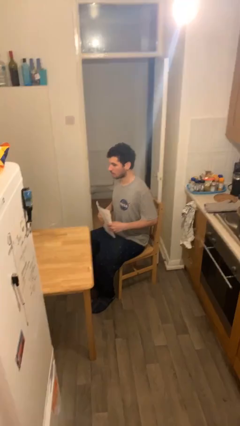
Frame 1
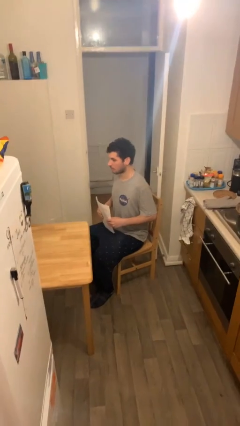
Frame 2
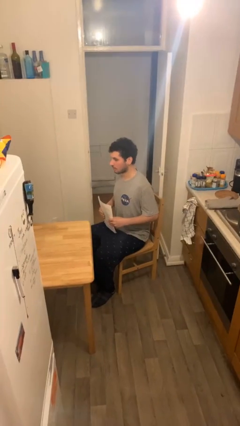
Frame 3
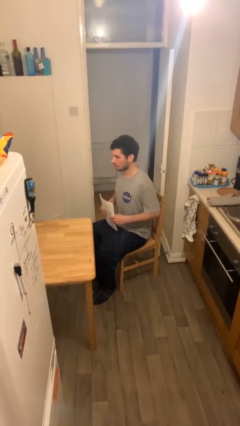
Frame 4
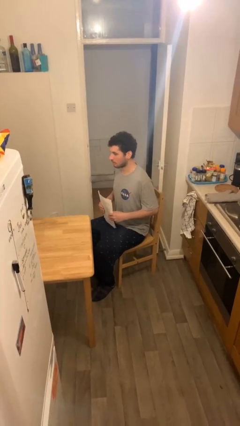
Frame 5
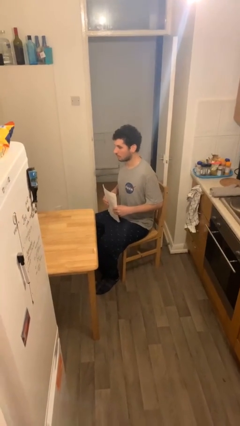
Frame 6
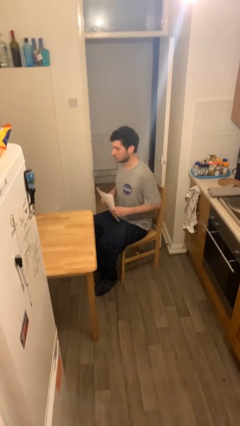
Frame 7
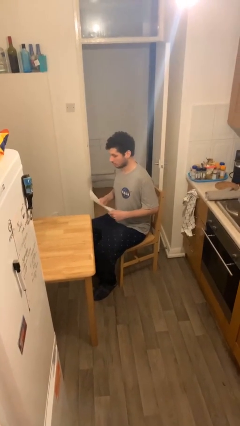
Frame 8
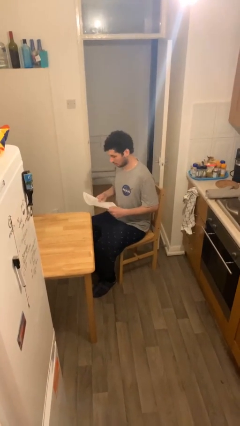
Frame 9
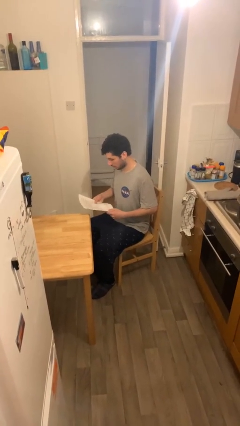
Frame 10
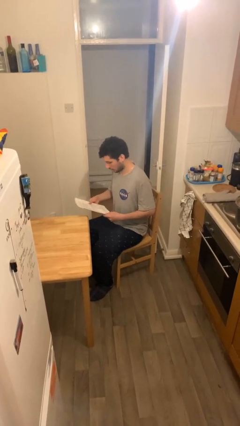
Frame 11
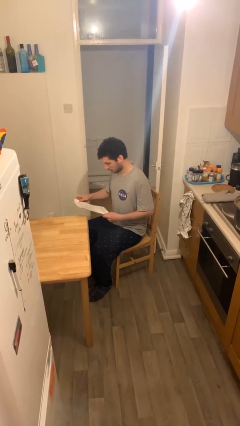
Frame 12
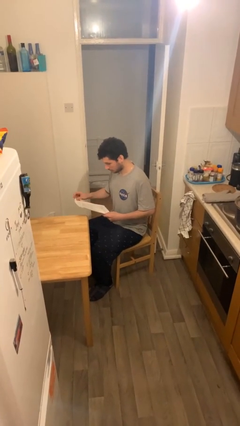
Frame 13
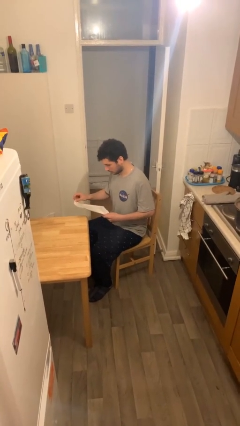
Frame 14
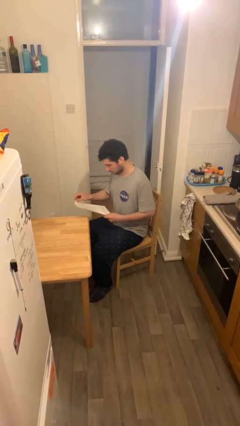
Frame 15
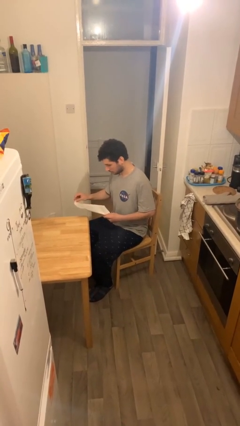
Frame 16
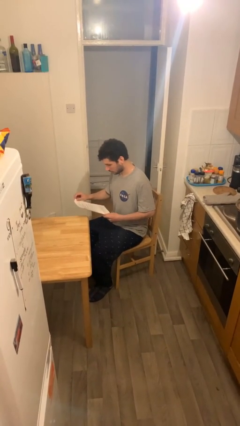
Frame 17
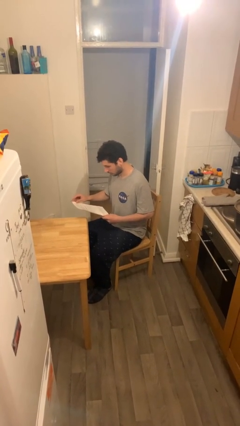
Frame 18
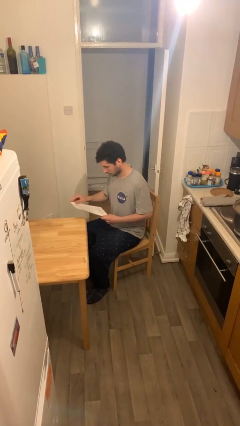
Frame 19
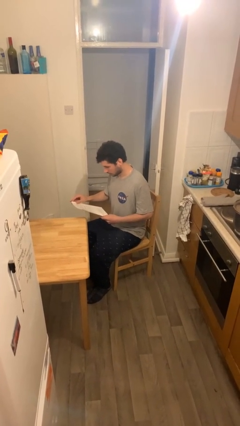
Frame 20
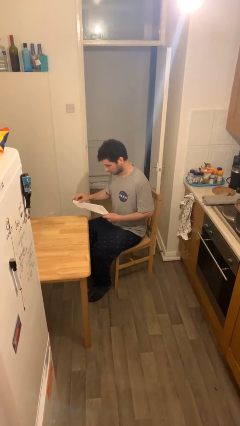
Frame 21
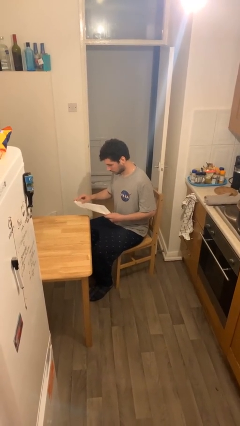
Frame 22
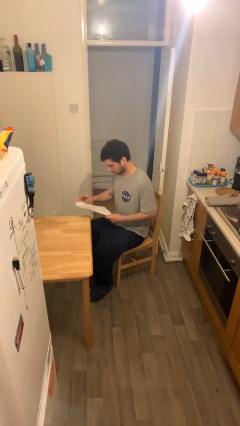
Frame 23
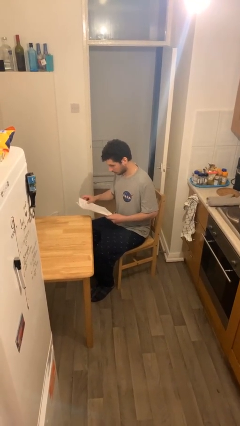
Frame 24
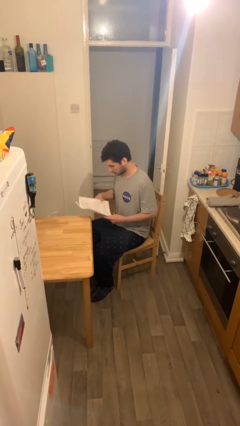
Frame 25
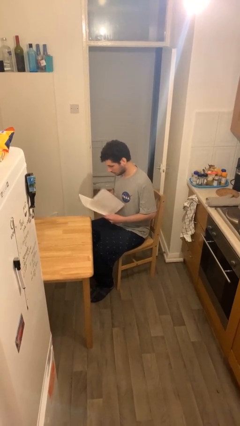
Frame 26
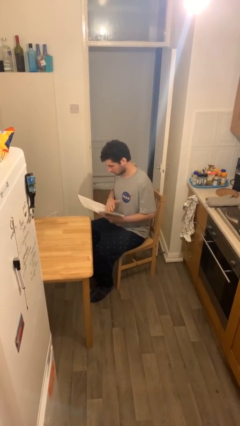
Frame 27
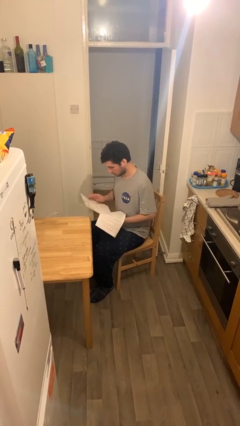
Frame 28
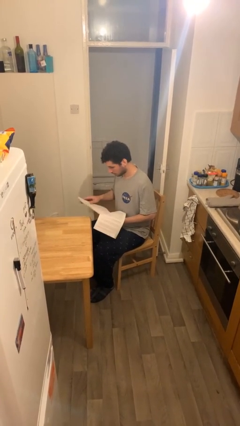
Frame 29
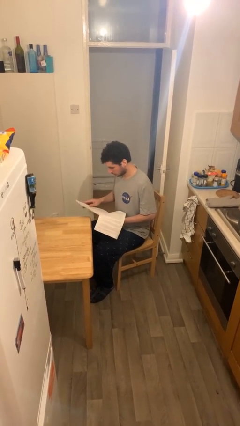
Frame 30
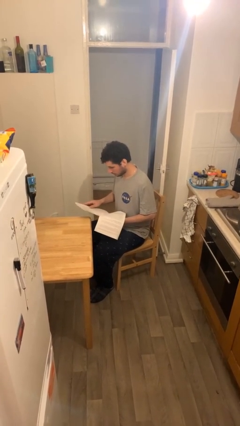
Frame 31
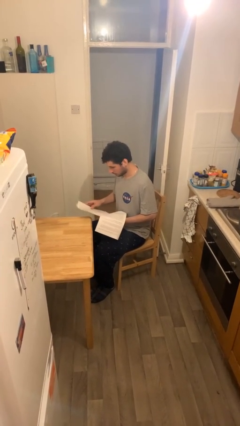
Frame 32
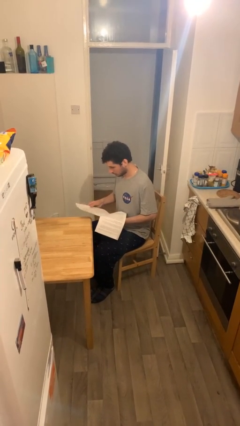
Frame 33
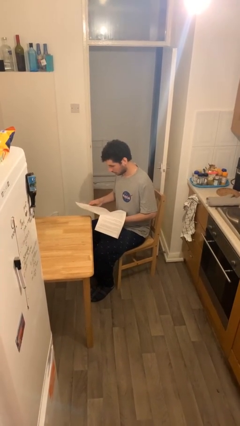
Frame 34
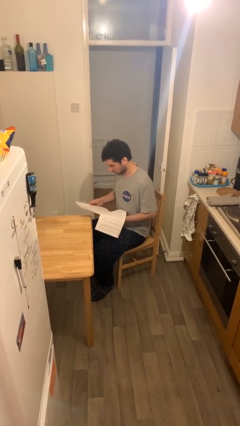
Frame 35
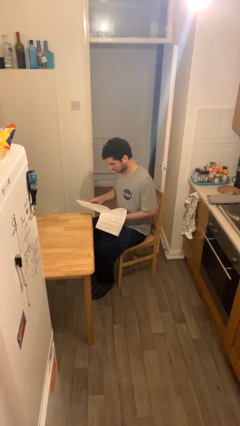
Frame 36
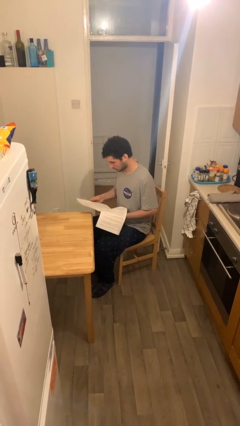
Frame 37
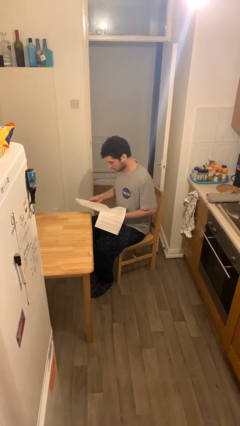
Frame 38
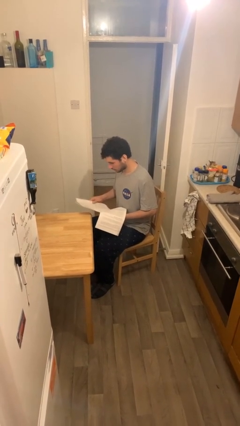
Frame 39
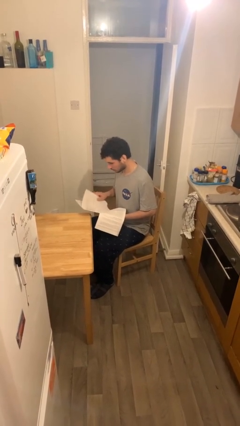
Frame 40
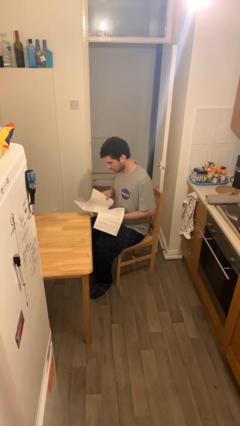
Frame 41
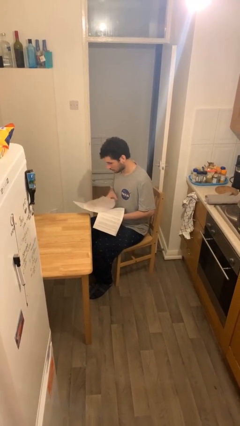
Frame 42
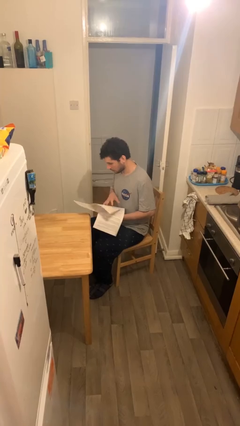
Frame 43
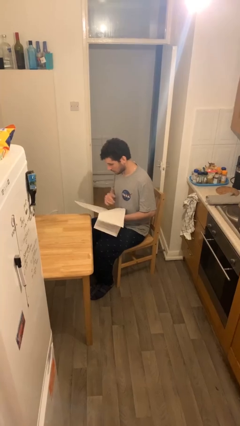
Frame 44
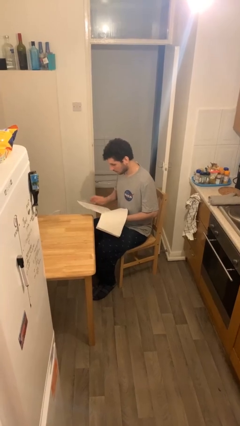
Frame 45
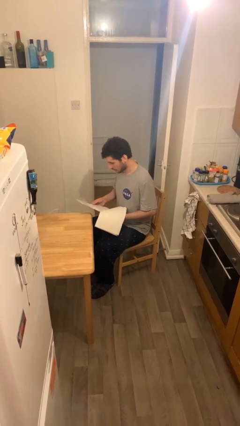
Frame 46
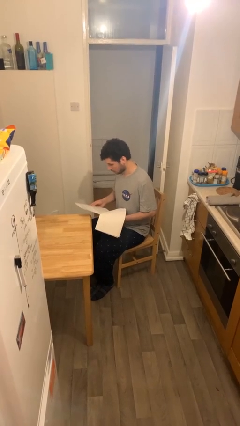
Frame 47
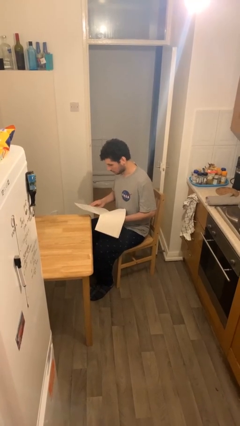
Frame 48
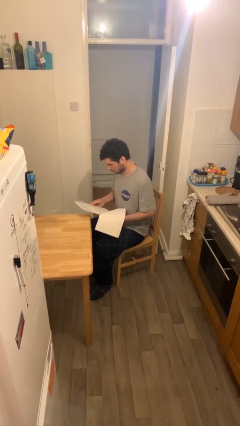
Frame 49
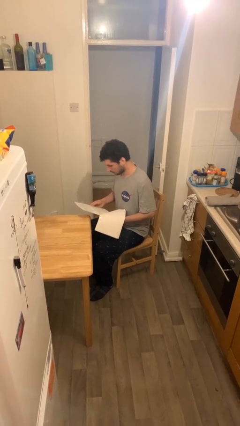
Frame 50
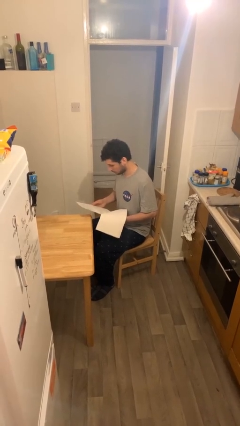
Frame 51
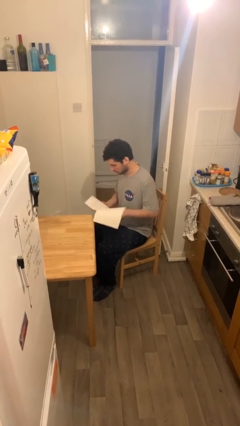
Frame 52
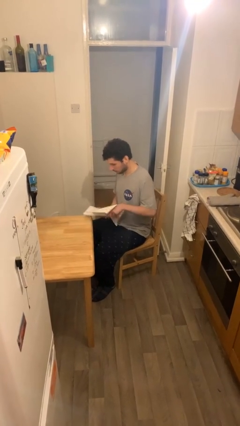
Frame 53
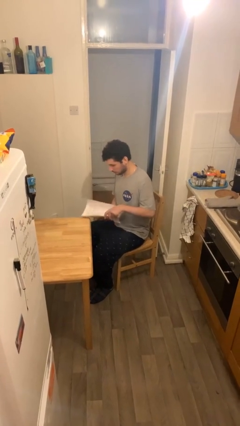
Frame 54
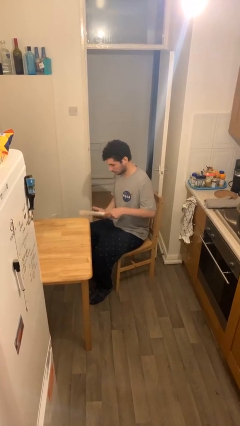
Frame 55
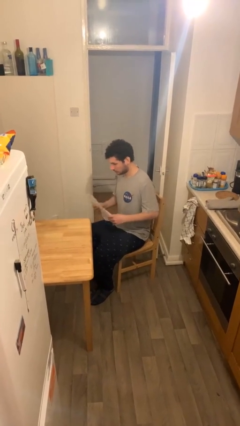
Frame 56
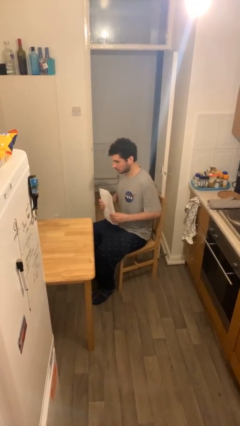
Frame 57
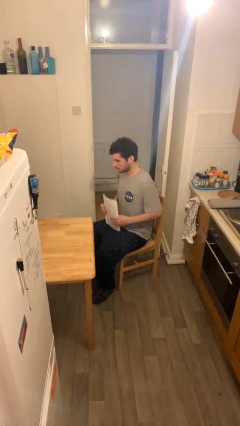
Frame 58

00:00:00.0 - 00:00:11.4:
person reads document

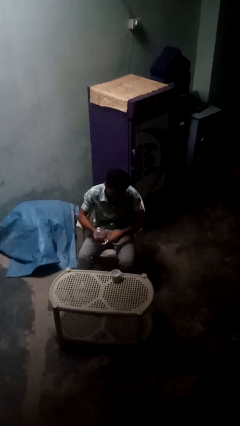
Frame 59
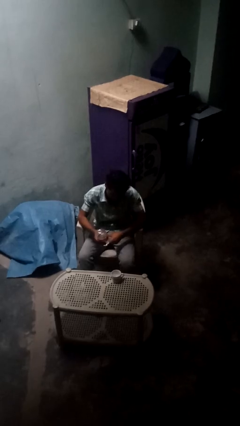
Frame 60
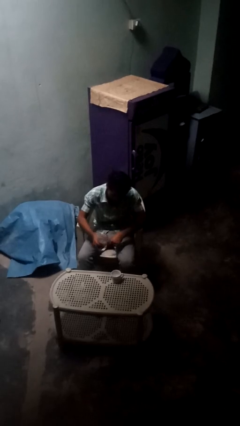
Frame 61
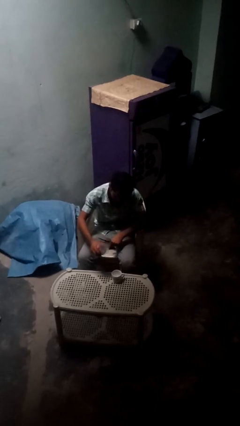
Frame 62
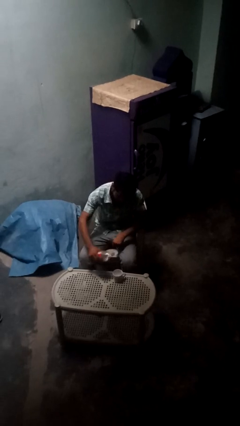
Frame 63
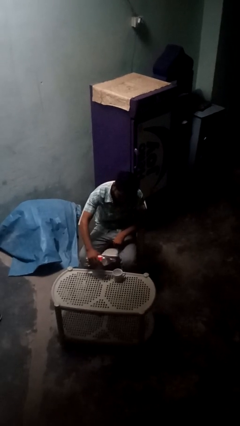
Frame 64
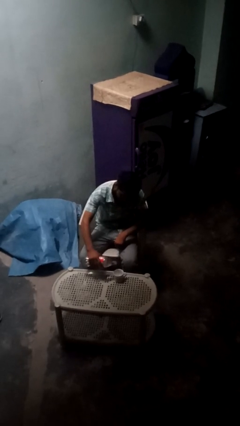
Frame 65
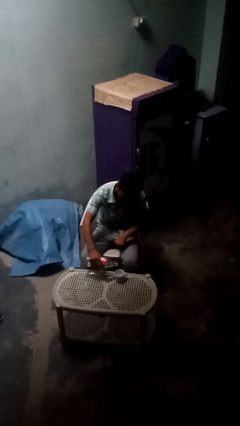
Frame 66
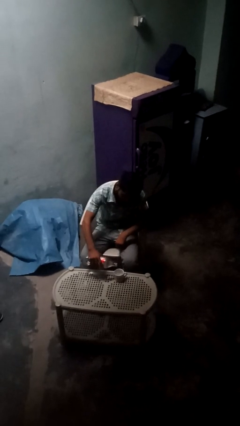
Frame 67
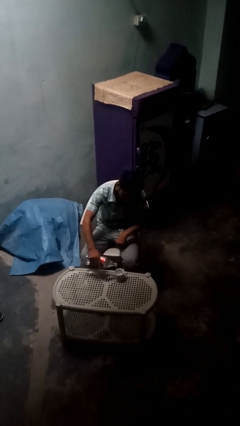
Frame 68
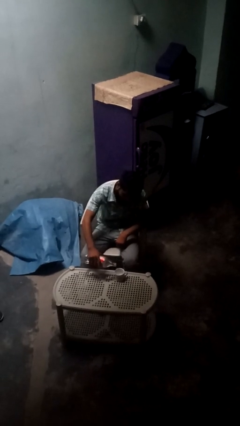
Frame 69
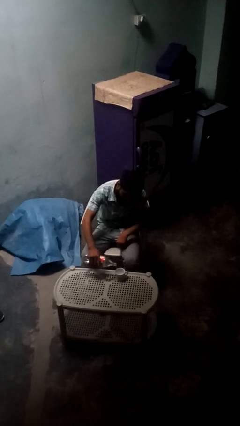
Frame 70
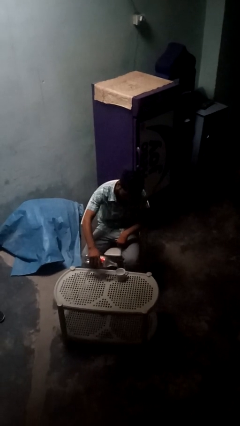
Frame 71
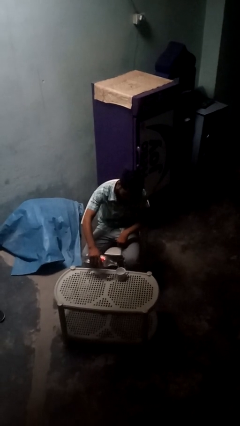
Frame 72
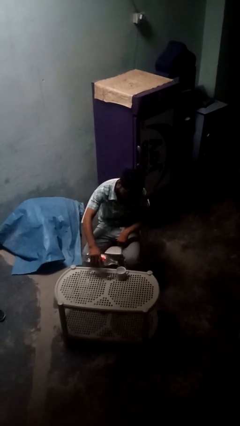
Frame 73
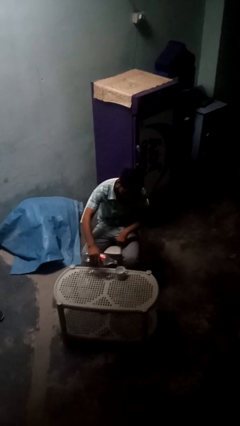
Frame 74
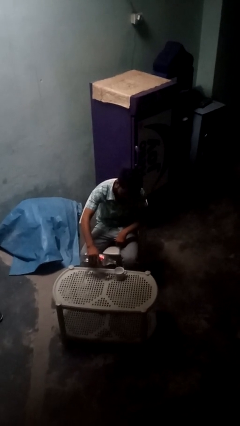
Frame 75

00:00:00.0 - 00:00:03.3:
person pours liquid into cup

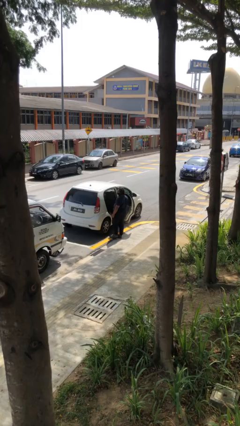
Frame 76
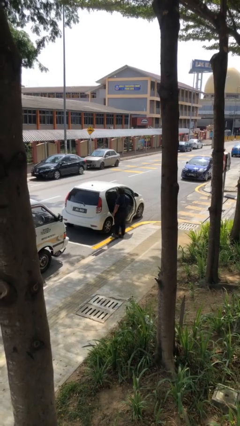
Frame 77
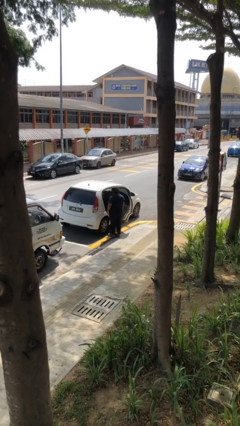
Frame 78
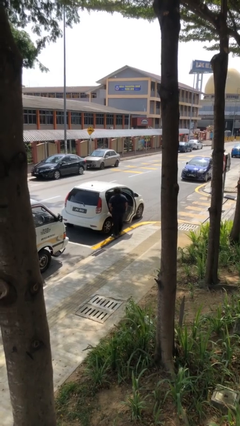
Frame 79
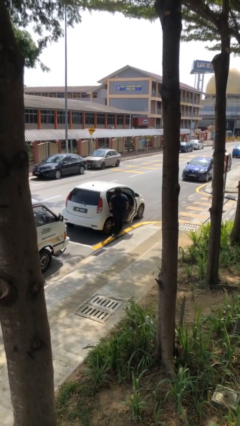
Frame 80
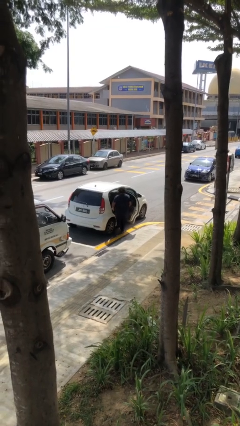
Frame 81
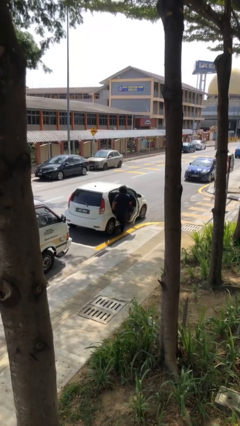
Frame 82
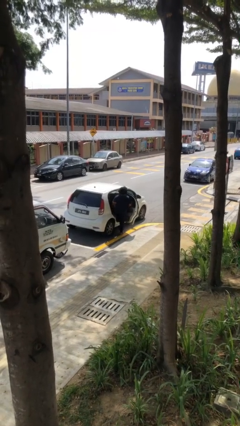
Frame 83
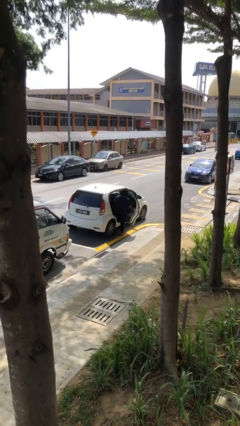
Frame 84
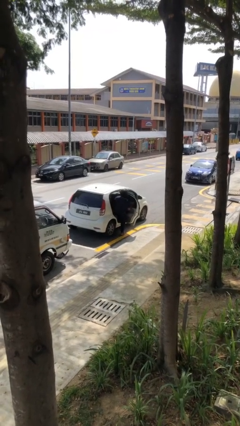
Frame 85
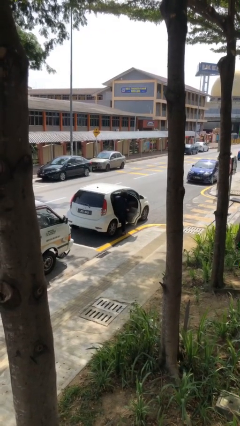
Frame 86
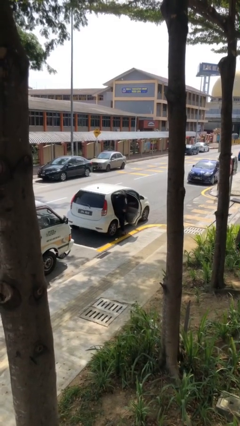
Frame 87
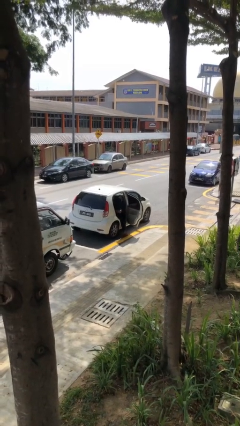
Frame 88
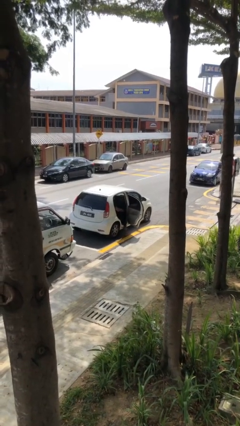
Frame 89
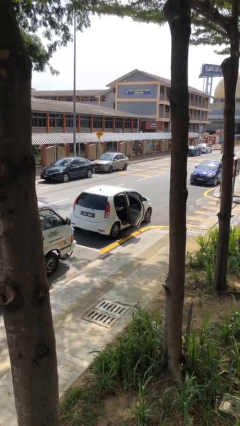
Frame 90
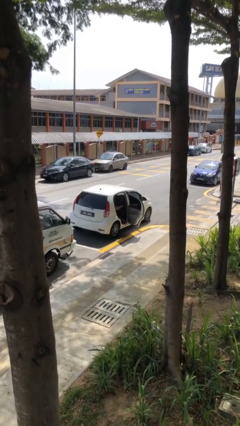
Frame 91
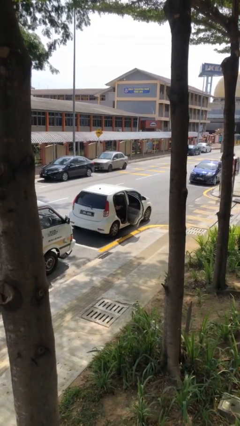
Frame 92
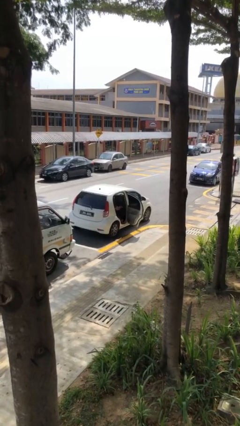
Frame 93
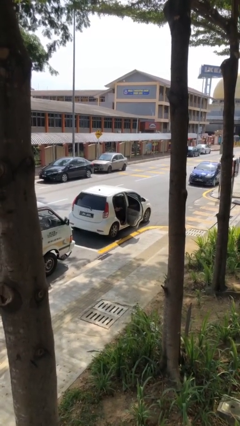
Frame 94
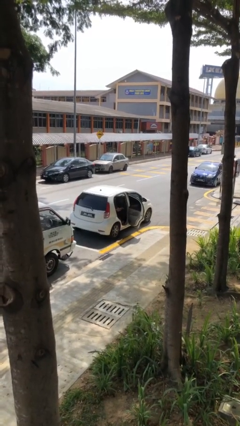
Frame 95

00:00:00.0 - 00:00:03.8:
person enters car
